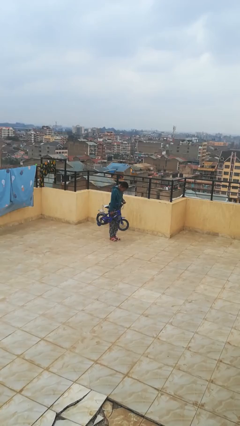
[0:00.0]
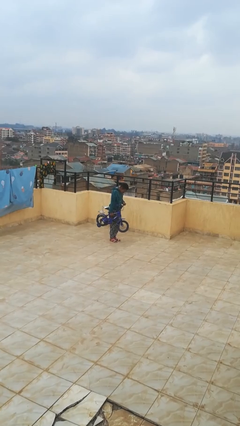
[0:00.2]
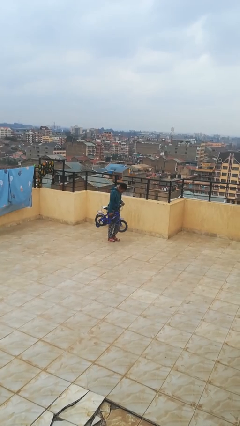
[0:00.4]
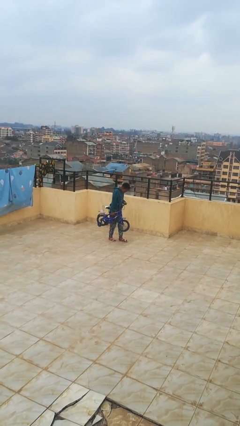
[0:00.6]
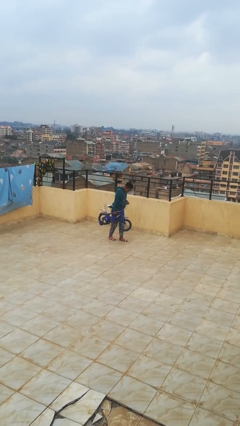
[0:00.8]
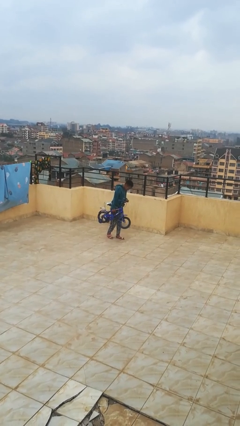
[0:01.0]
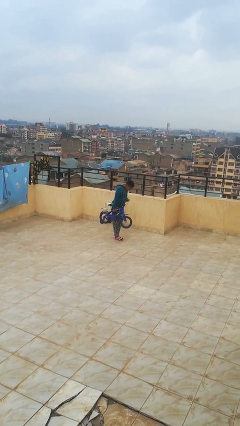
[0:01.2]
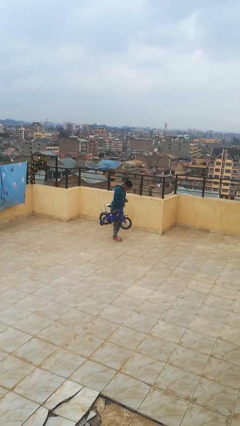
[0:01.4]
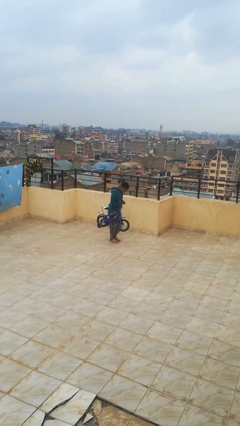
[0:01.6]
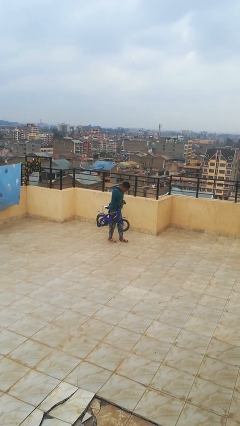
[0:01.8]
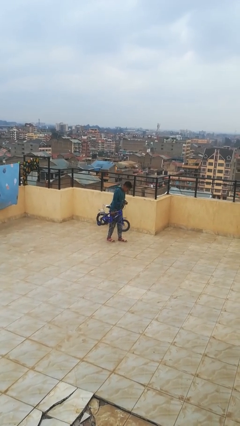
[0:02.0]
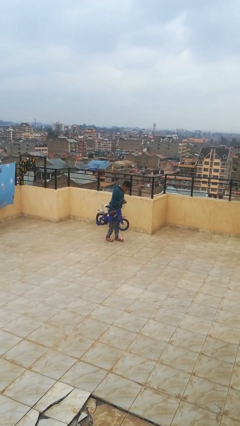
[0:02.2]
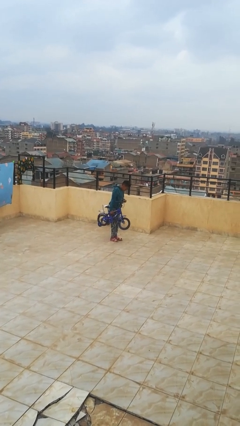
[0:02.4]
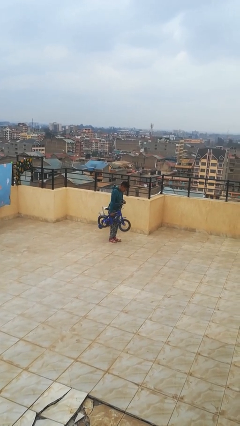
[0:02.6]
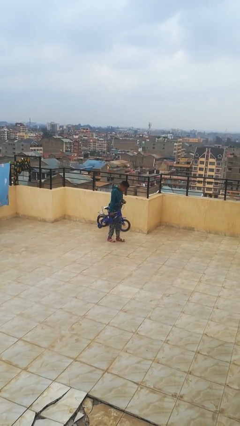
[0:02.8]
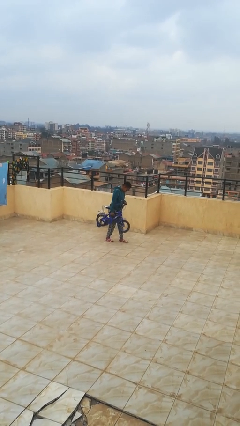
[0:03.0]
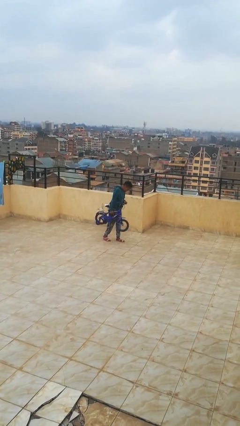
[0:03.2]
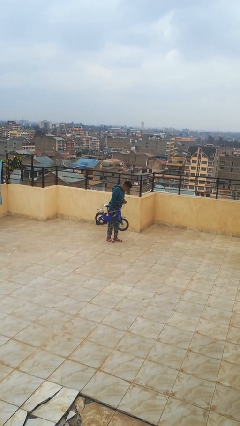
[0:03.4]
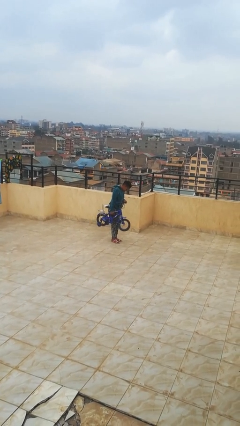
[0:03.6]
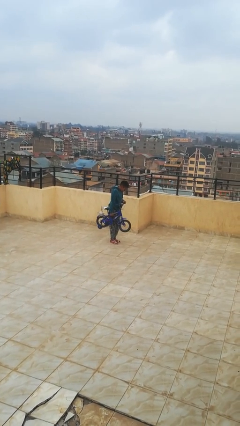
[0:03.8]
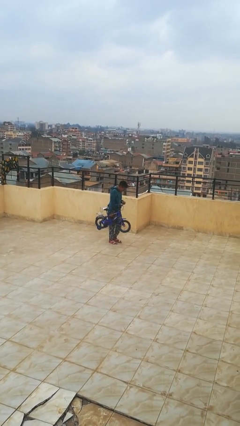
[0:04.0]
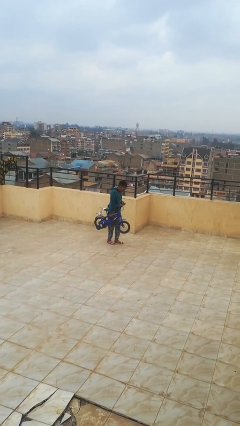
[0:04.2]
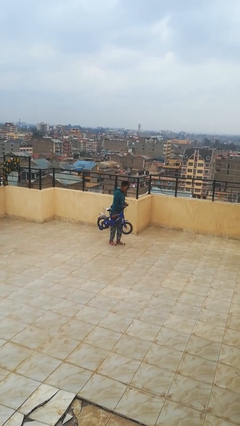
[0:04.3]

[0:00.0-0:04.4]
person carries bicycle

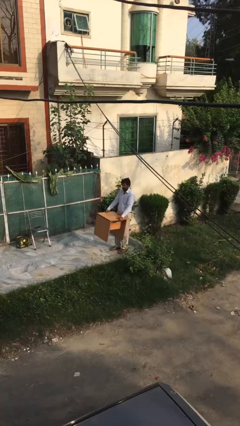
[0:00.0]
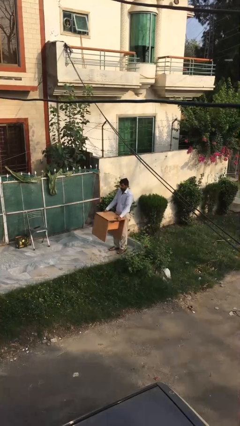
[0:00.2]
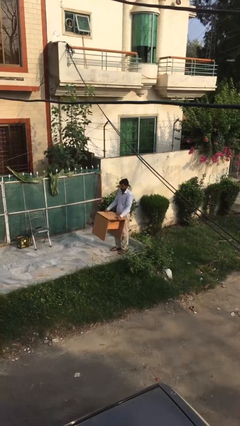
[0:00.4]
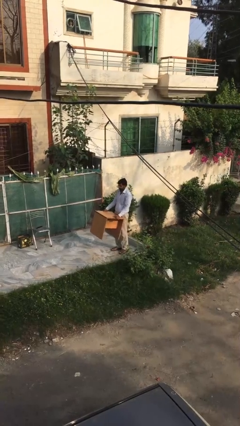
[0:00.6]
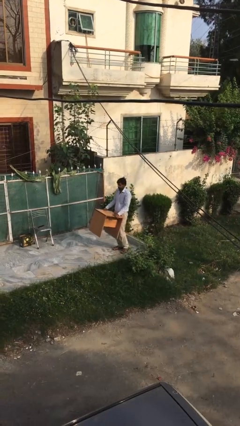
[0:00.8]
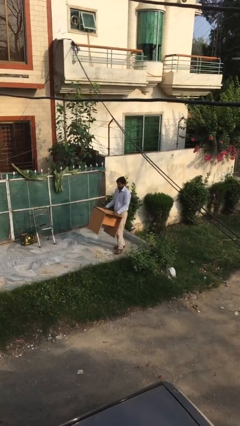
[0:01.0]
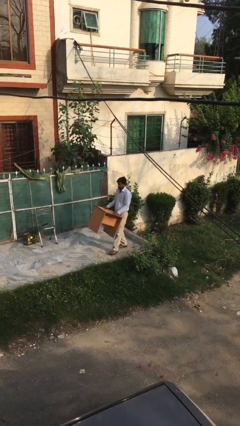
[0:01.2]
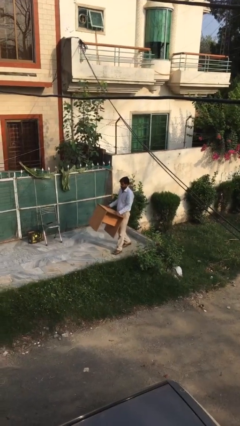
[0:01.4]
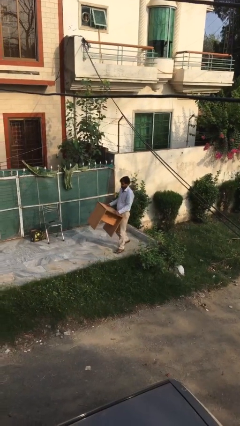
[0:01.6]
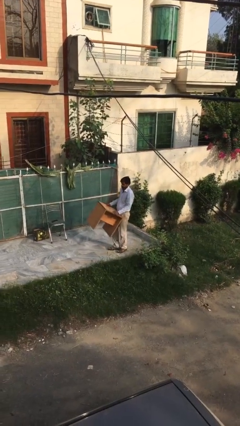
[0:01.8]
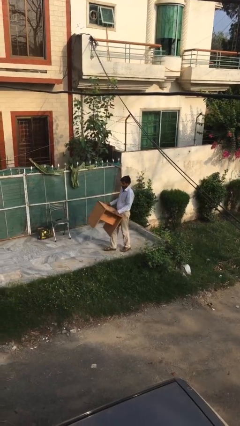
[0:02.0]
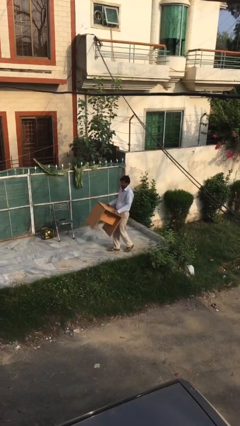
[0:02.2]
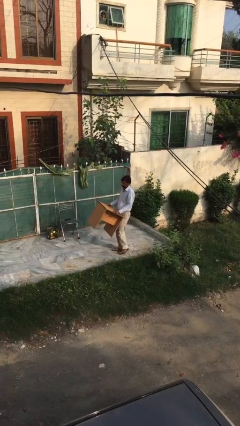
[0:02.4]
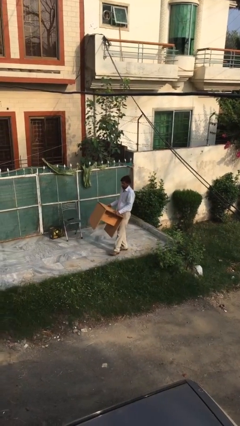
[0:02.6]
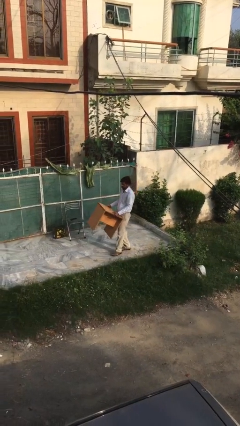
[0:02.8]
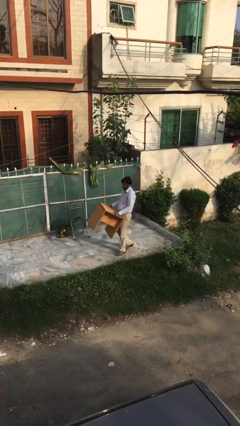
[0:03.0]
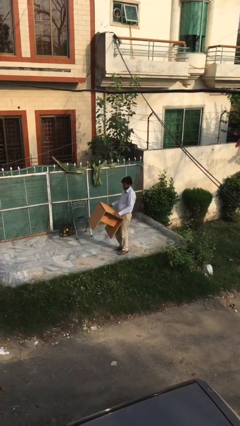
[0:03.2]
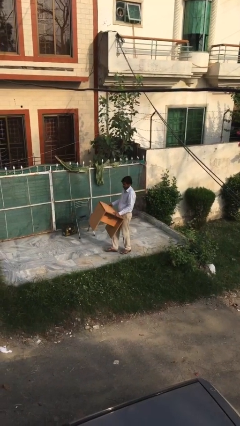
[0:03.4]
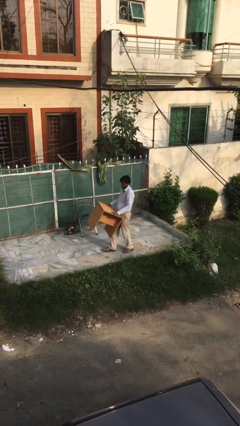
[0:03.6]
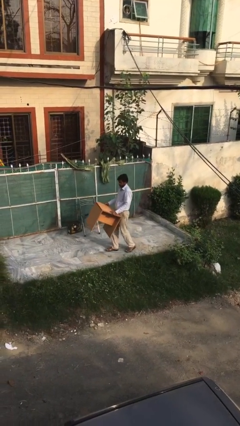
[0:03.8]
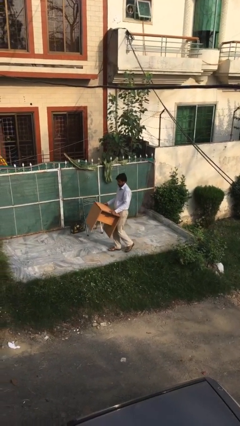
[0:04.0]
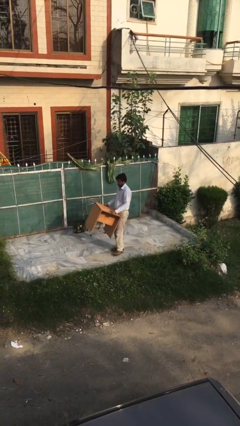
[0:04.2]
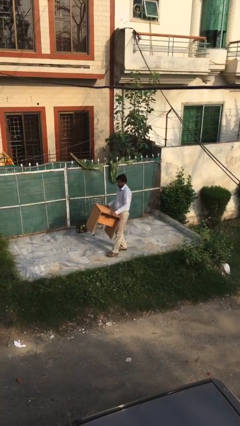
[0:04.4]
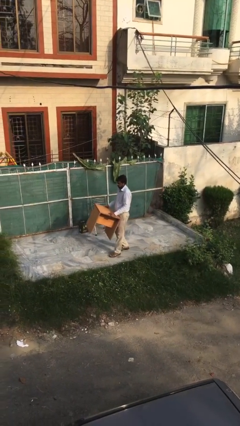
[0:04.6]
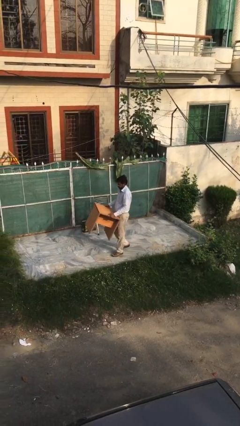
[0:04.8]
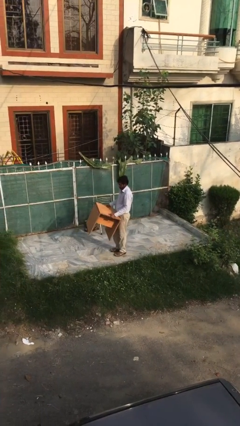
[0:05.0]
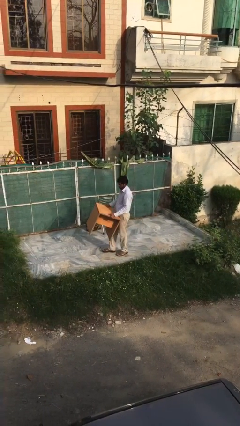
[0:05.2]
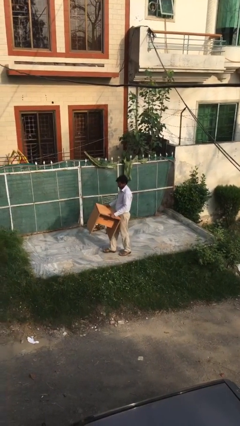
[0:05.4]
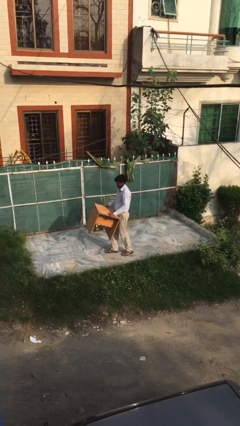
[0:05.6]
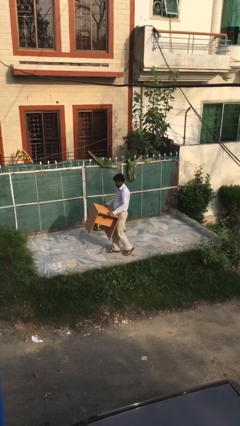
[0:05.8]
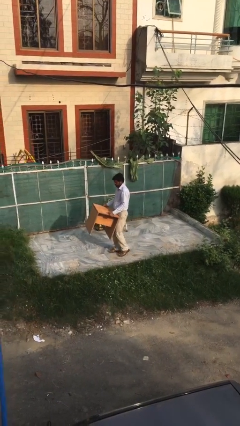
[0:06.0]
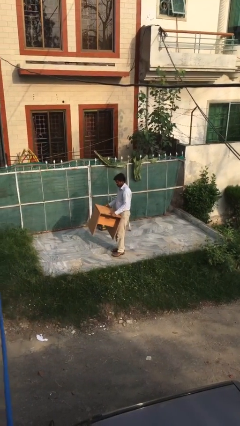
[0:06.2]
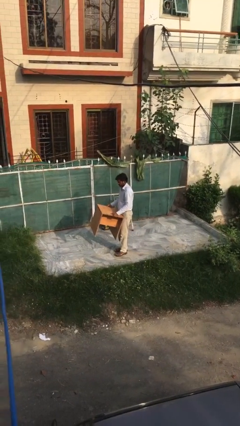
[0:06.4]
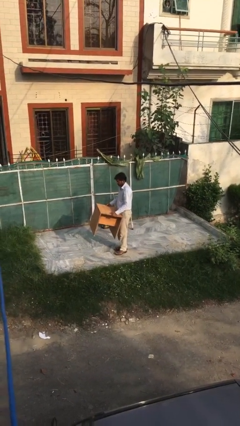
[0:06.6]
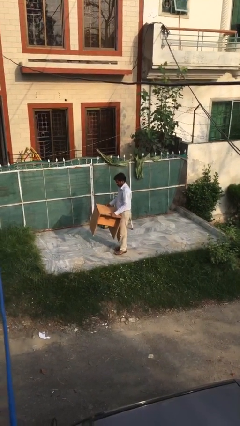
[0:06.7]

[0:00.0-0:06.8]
person carries heavy object

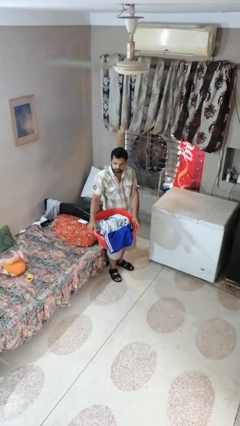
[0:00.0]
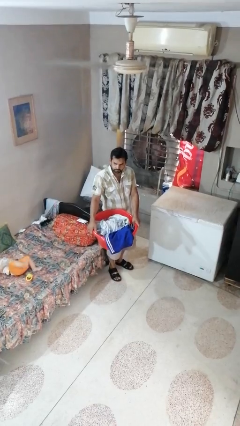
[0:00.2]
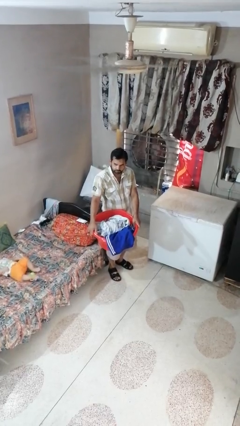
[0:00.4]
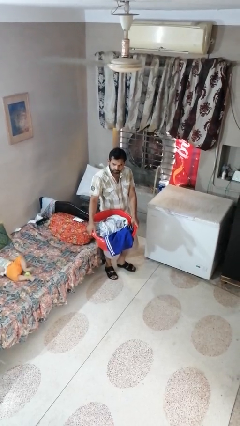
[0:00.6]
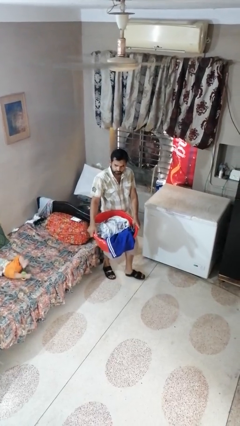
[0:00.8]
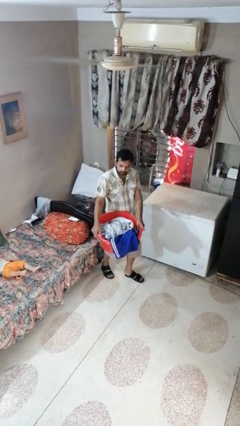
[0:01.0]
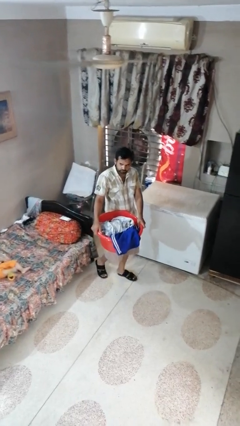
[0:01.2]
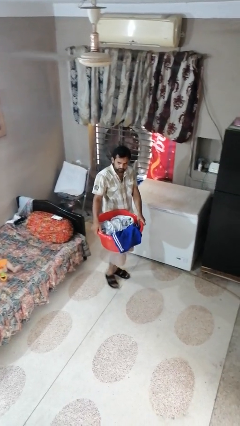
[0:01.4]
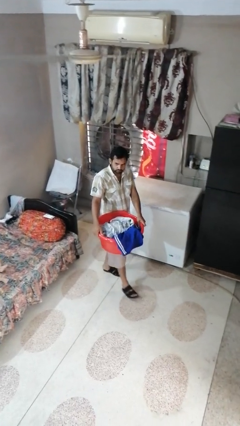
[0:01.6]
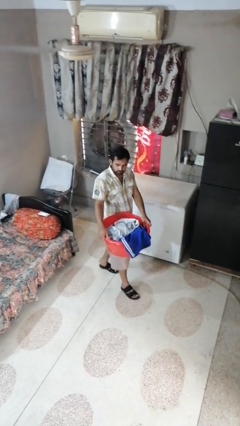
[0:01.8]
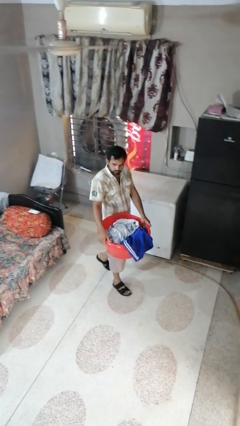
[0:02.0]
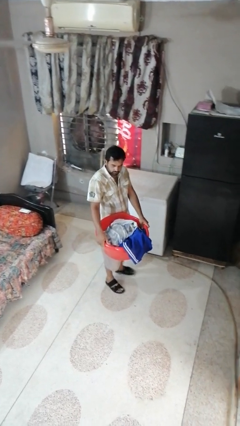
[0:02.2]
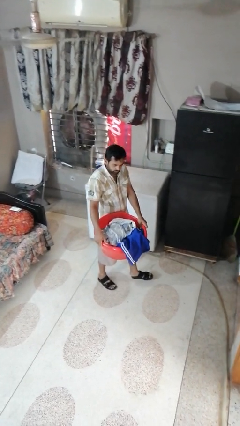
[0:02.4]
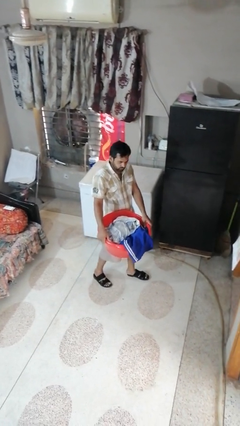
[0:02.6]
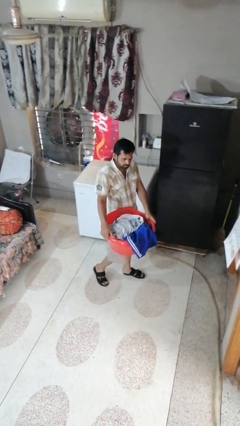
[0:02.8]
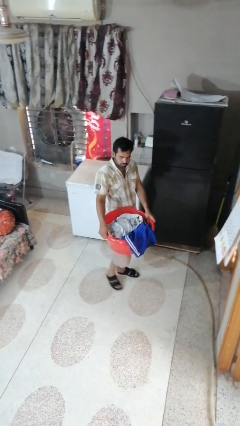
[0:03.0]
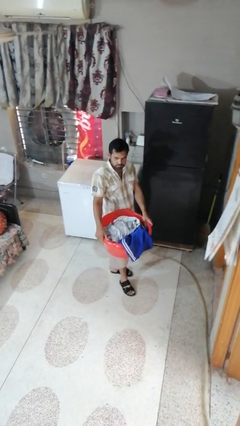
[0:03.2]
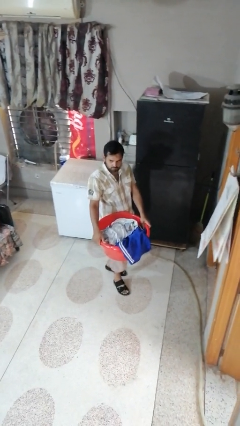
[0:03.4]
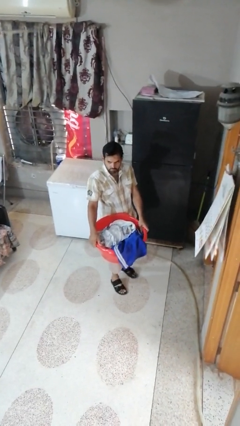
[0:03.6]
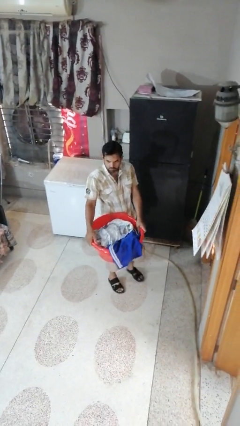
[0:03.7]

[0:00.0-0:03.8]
person carries laundry basket

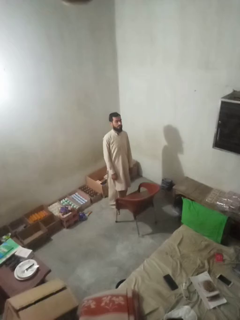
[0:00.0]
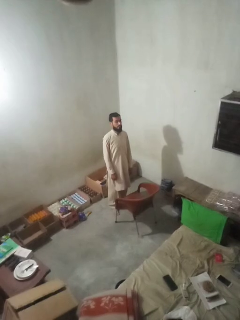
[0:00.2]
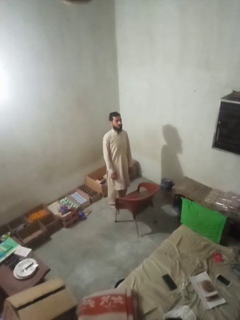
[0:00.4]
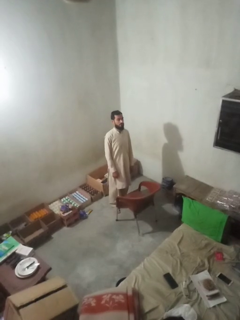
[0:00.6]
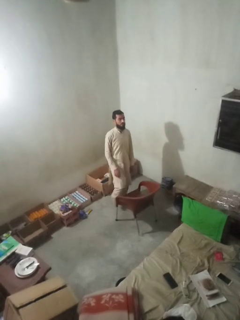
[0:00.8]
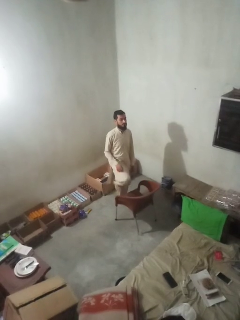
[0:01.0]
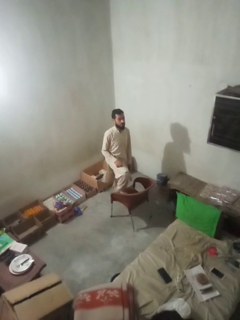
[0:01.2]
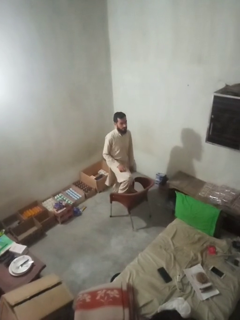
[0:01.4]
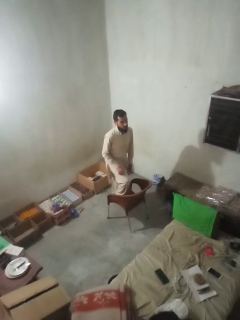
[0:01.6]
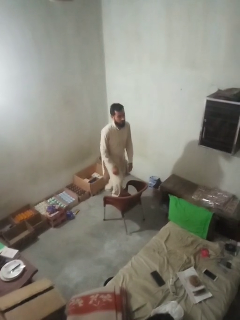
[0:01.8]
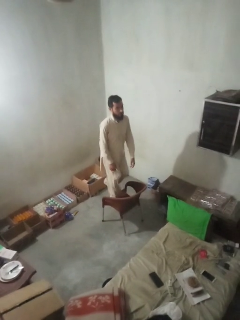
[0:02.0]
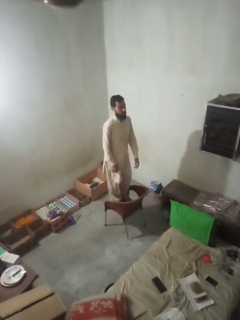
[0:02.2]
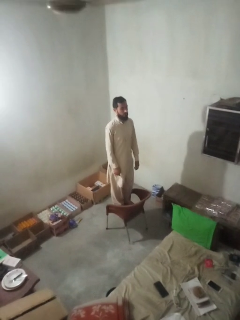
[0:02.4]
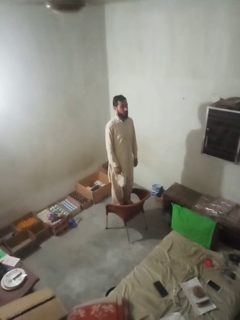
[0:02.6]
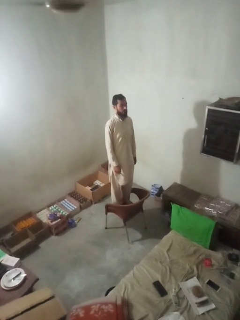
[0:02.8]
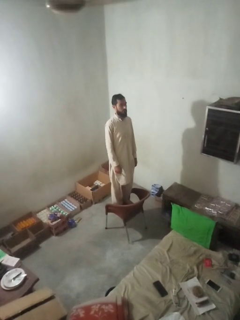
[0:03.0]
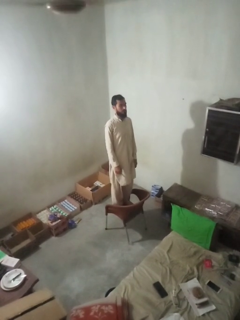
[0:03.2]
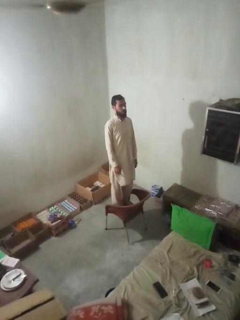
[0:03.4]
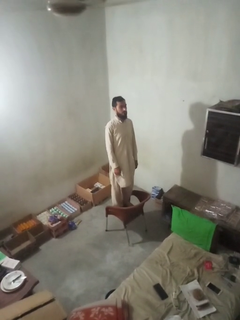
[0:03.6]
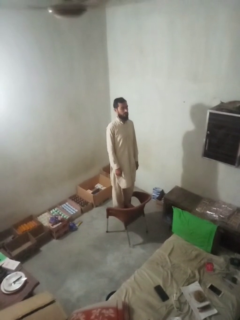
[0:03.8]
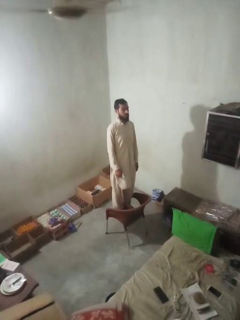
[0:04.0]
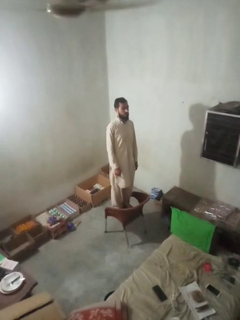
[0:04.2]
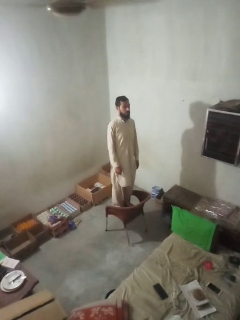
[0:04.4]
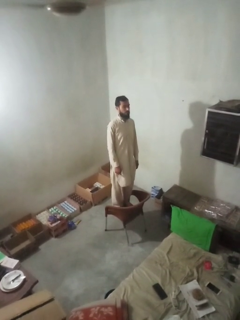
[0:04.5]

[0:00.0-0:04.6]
person climbs on chair
